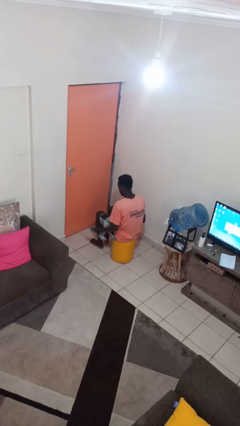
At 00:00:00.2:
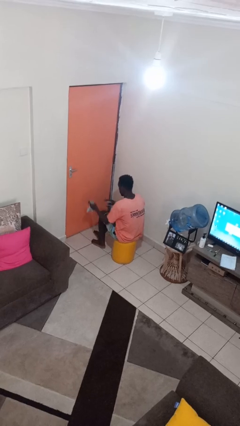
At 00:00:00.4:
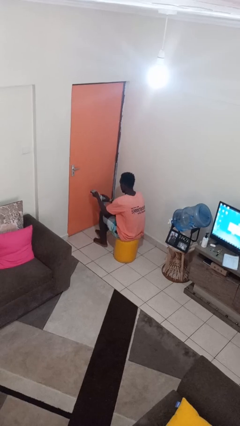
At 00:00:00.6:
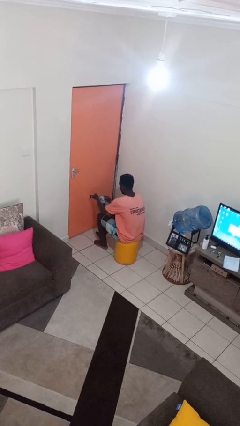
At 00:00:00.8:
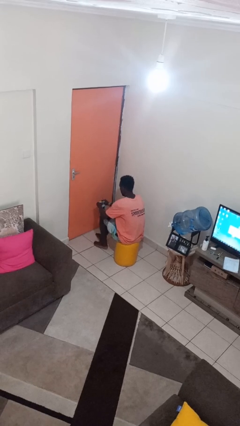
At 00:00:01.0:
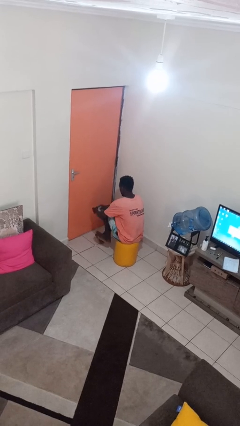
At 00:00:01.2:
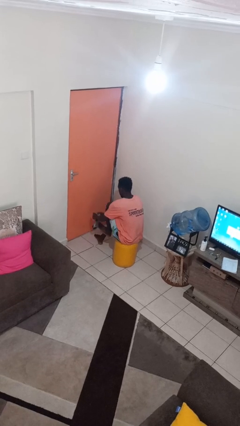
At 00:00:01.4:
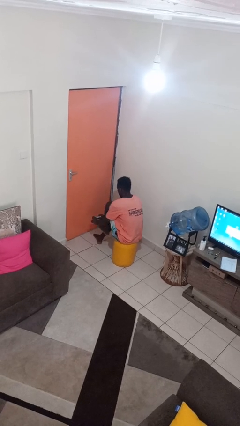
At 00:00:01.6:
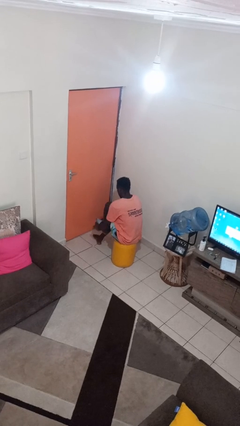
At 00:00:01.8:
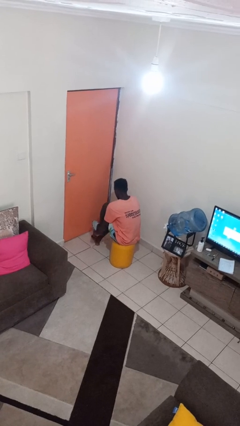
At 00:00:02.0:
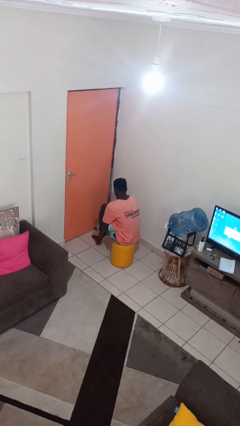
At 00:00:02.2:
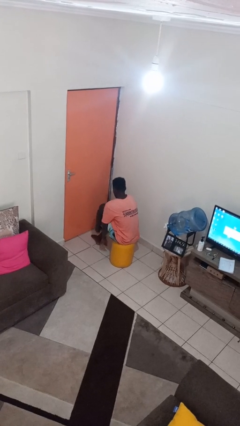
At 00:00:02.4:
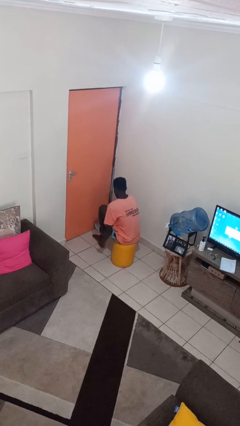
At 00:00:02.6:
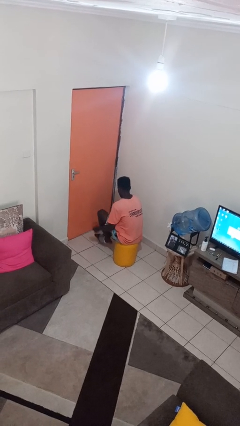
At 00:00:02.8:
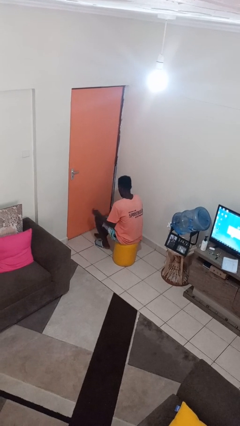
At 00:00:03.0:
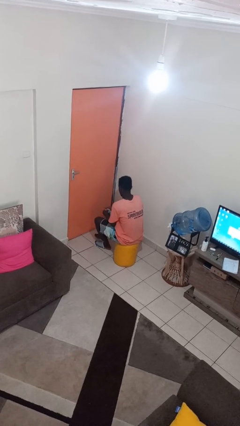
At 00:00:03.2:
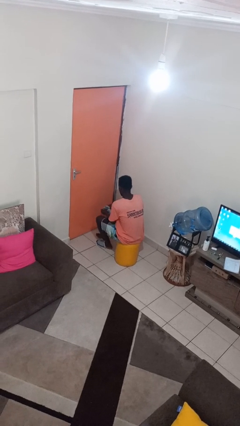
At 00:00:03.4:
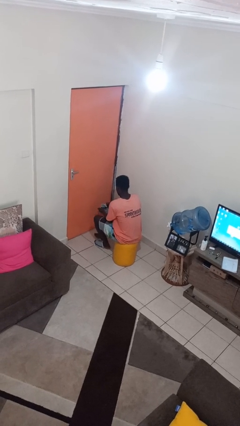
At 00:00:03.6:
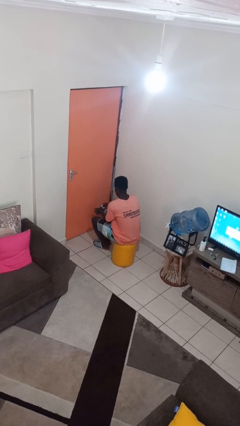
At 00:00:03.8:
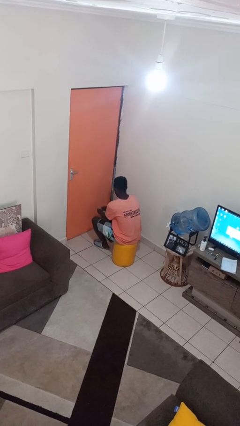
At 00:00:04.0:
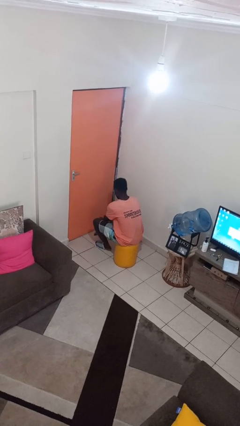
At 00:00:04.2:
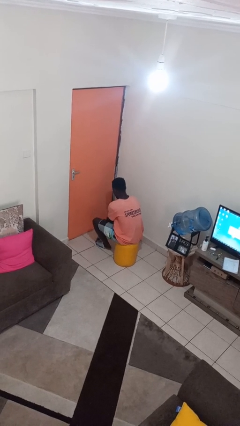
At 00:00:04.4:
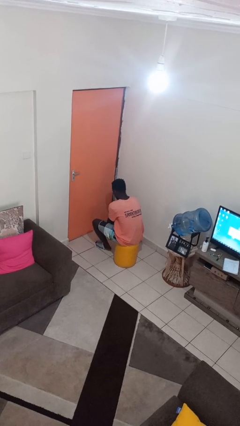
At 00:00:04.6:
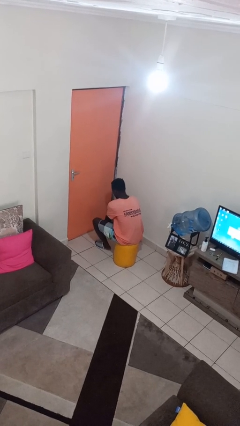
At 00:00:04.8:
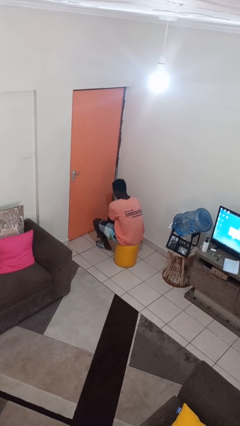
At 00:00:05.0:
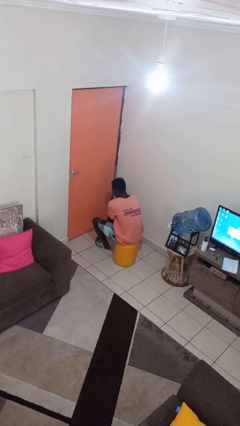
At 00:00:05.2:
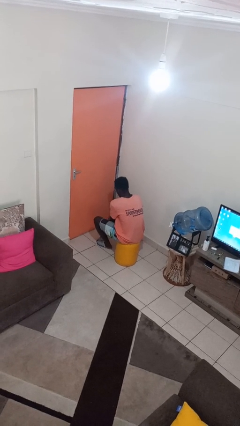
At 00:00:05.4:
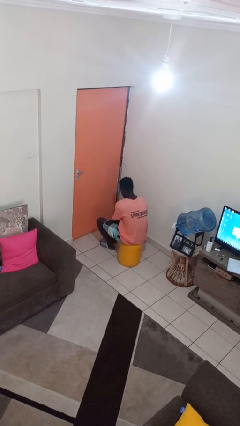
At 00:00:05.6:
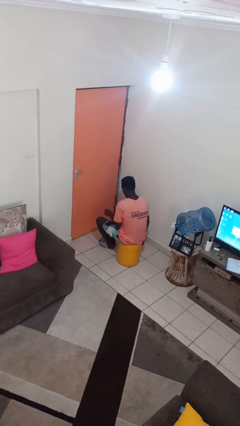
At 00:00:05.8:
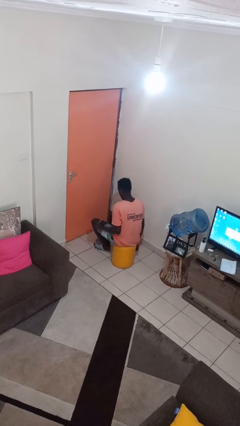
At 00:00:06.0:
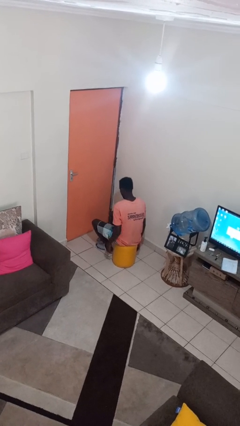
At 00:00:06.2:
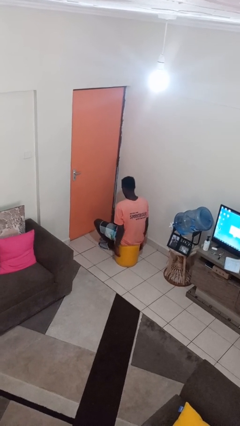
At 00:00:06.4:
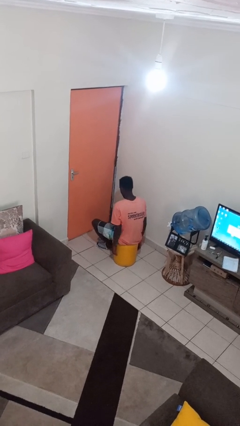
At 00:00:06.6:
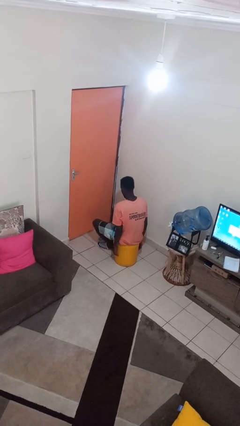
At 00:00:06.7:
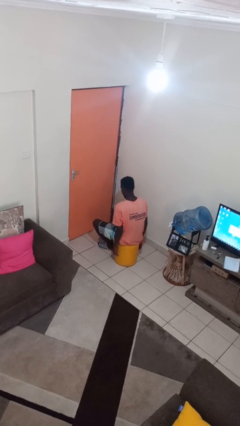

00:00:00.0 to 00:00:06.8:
person puts on socks

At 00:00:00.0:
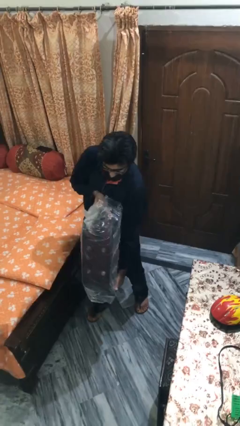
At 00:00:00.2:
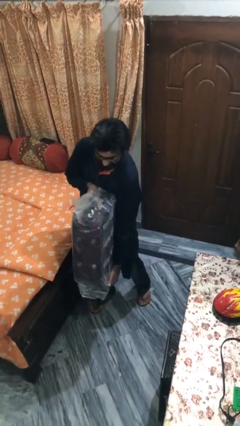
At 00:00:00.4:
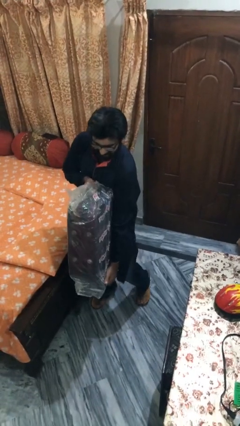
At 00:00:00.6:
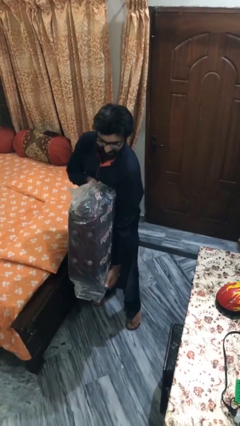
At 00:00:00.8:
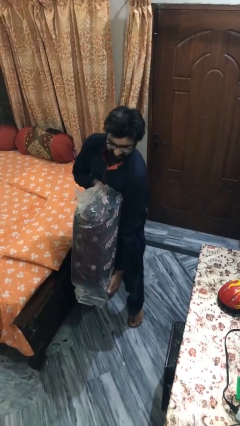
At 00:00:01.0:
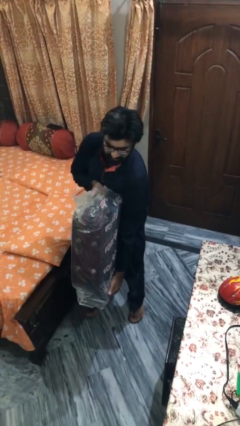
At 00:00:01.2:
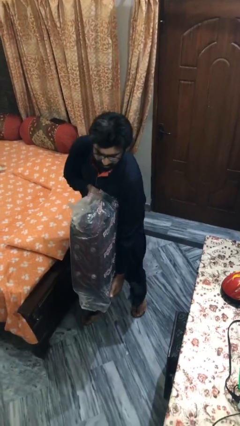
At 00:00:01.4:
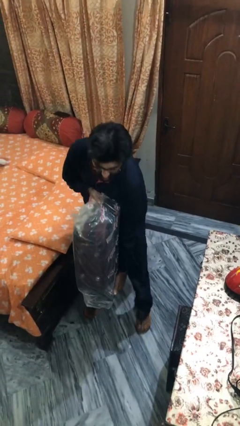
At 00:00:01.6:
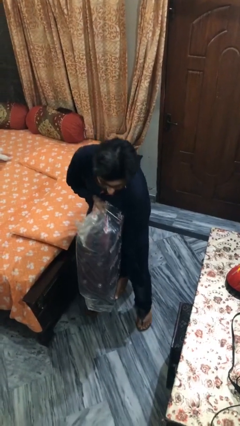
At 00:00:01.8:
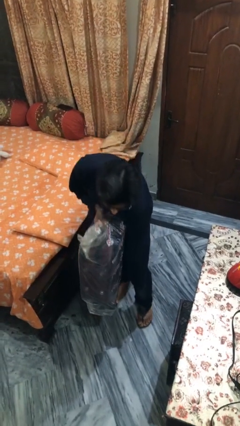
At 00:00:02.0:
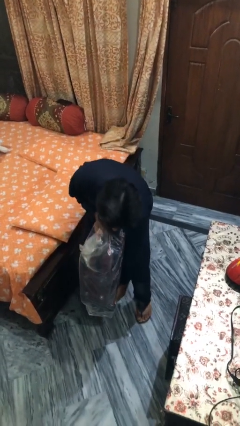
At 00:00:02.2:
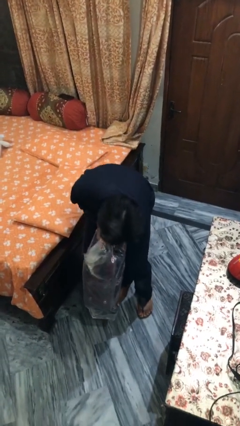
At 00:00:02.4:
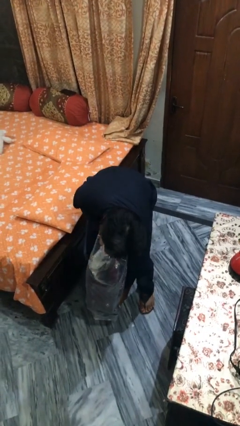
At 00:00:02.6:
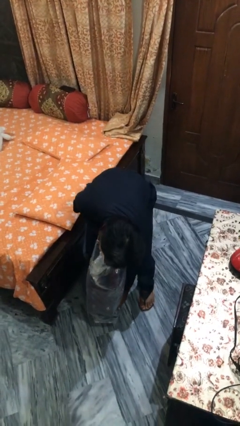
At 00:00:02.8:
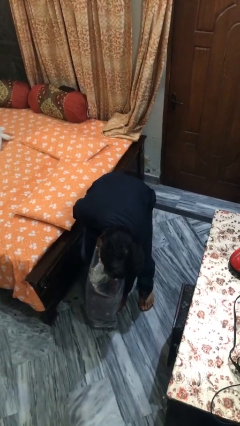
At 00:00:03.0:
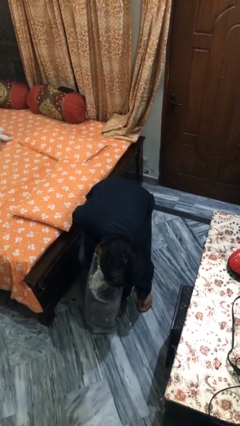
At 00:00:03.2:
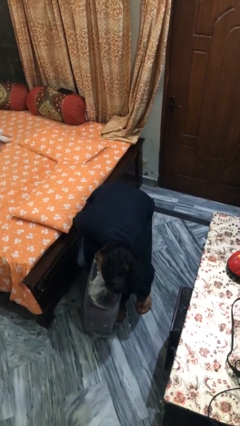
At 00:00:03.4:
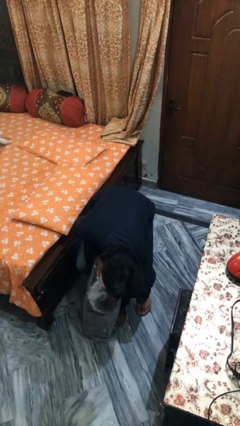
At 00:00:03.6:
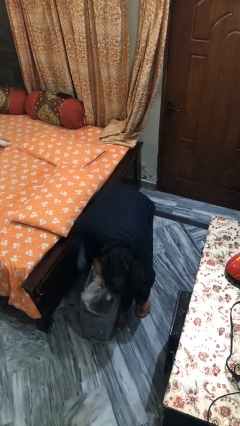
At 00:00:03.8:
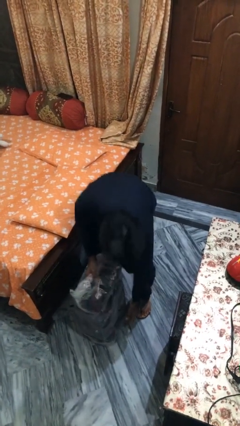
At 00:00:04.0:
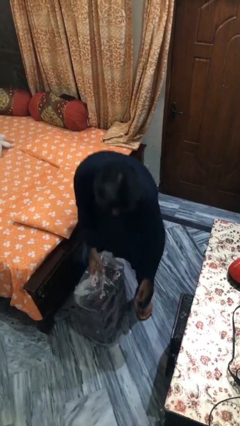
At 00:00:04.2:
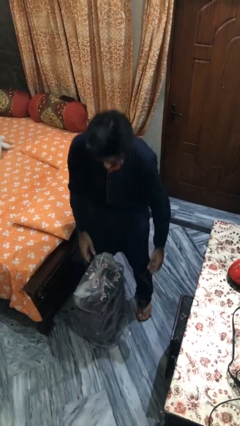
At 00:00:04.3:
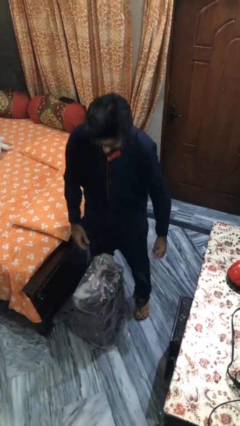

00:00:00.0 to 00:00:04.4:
person puts down object on floor

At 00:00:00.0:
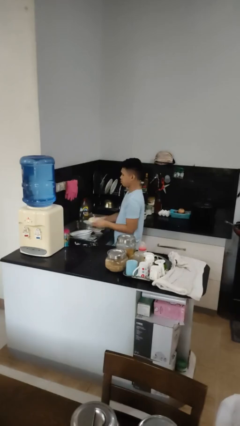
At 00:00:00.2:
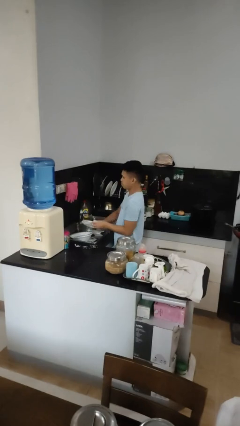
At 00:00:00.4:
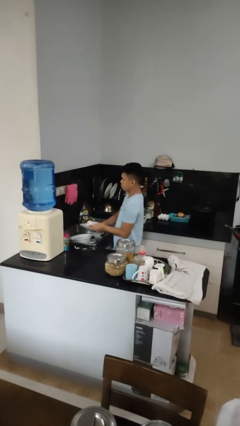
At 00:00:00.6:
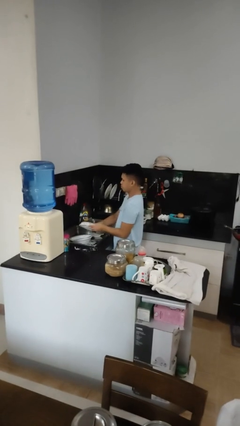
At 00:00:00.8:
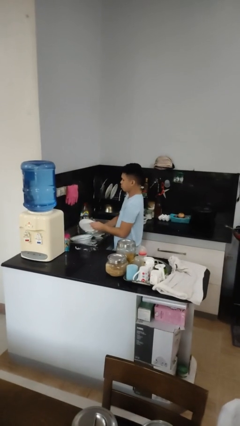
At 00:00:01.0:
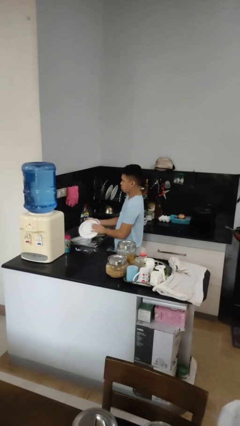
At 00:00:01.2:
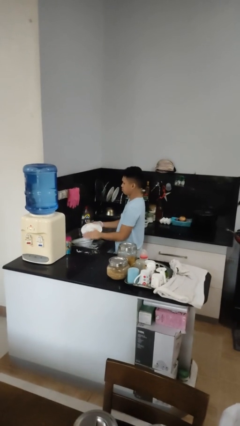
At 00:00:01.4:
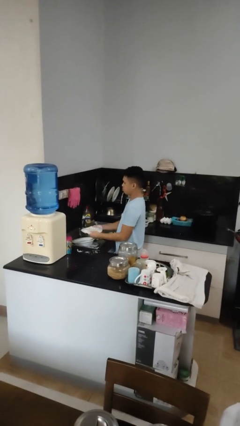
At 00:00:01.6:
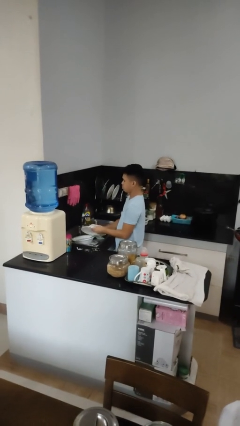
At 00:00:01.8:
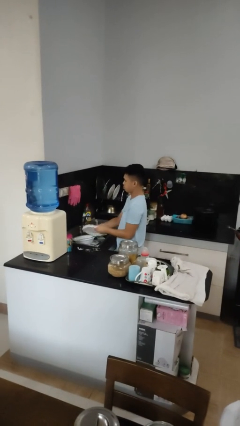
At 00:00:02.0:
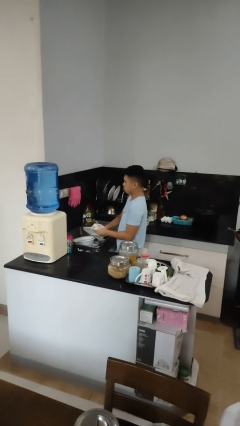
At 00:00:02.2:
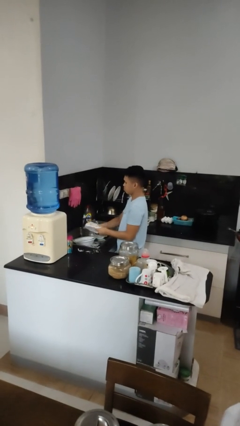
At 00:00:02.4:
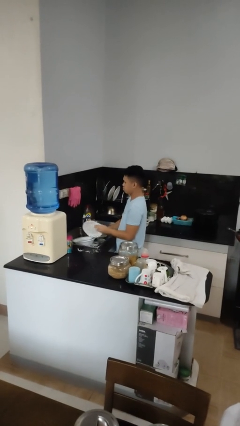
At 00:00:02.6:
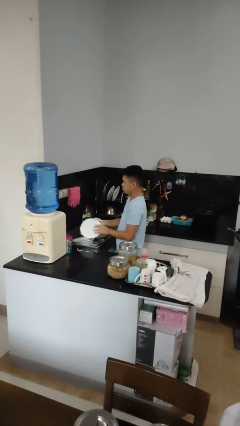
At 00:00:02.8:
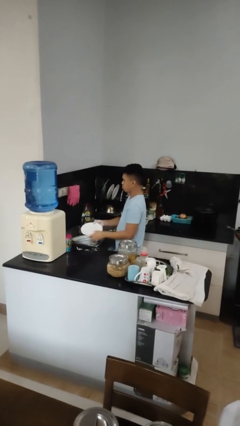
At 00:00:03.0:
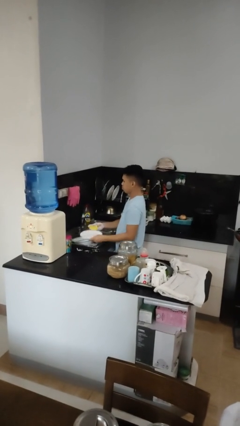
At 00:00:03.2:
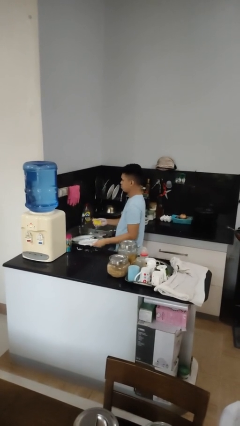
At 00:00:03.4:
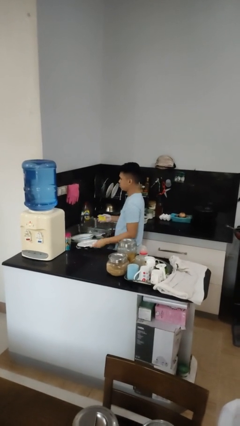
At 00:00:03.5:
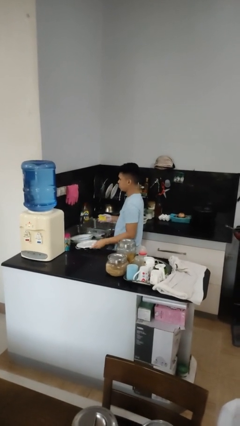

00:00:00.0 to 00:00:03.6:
person washes dish

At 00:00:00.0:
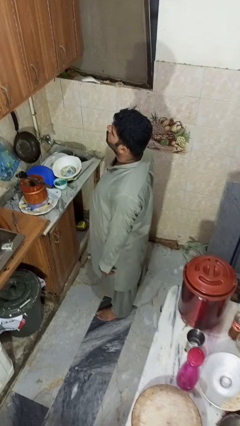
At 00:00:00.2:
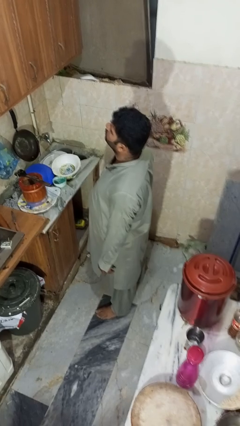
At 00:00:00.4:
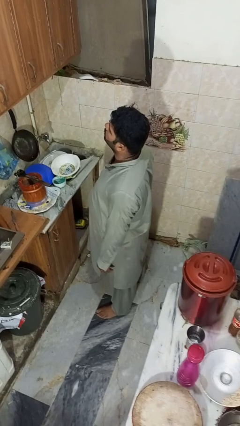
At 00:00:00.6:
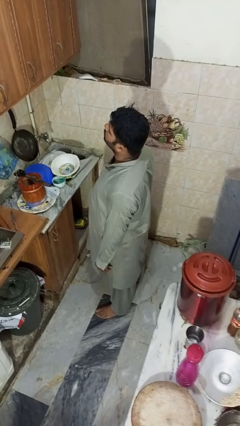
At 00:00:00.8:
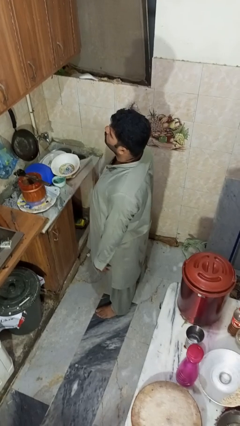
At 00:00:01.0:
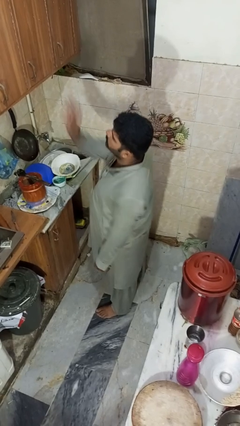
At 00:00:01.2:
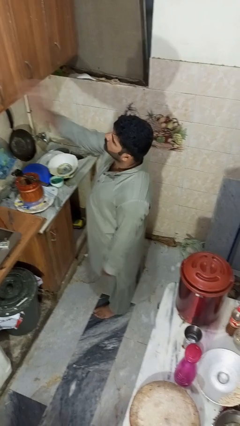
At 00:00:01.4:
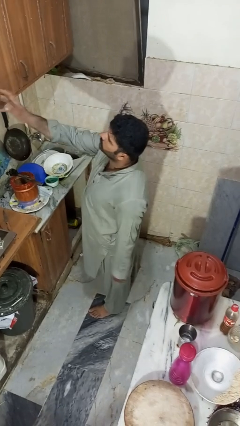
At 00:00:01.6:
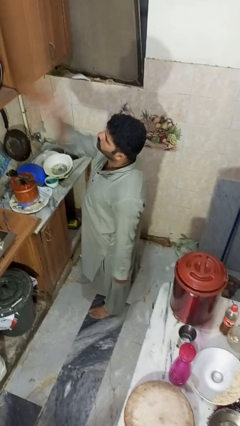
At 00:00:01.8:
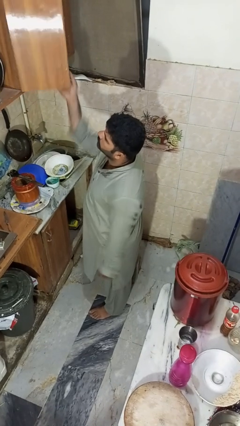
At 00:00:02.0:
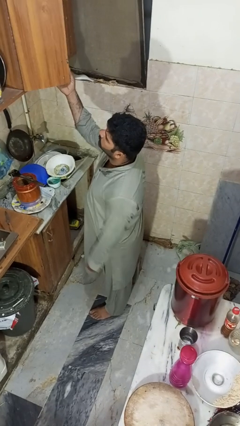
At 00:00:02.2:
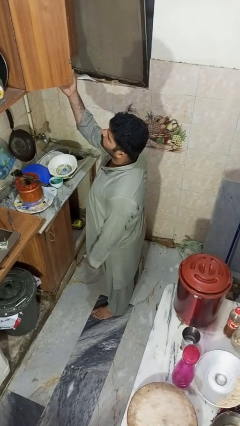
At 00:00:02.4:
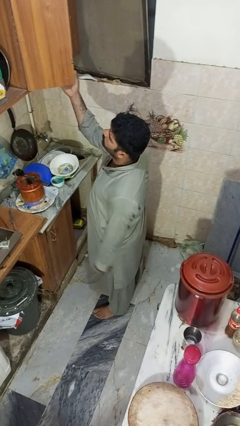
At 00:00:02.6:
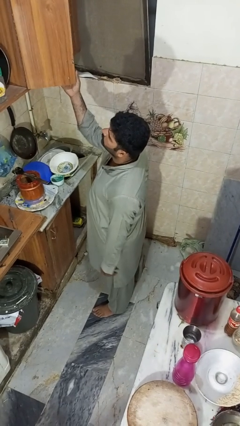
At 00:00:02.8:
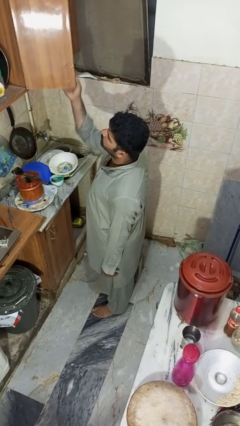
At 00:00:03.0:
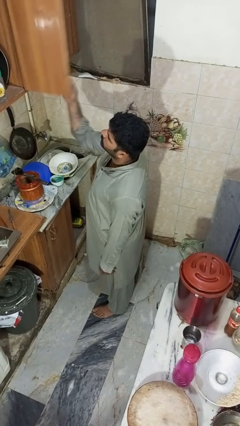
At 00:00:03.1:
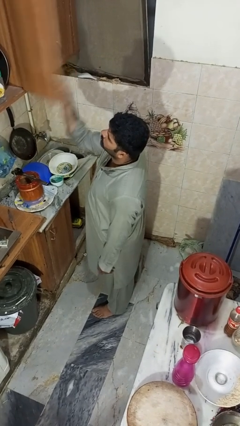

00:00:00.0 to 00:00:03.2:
person opens cabinet
